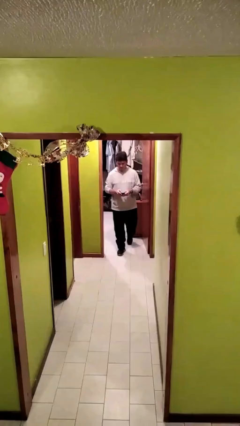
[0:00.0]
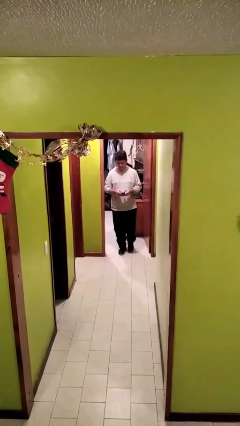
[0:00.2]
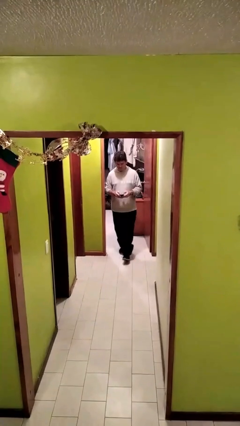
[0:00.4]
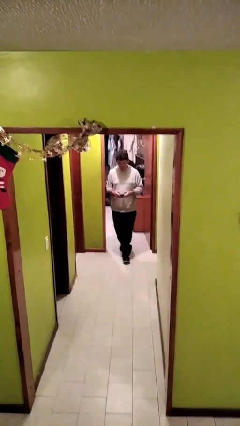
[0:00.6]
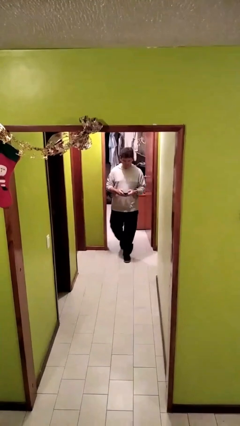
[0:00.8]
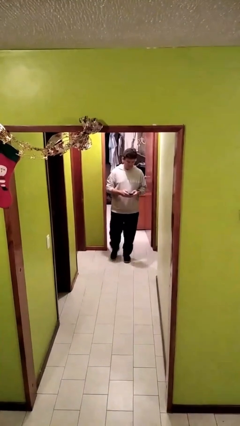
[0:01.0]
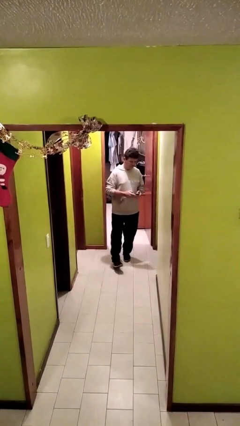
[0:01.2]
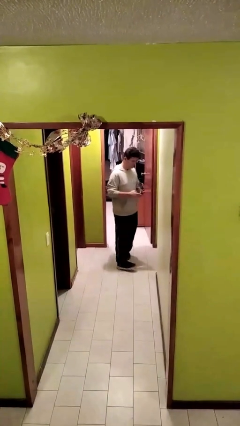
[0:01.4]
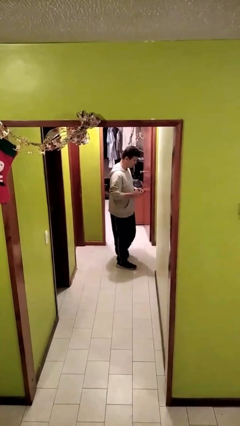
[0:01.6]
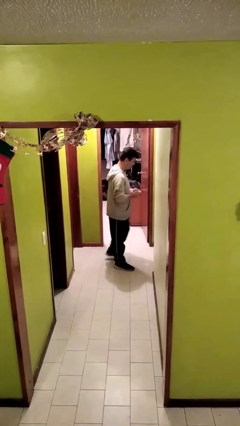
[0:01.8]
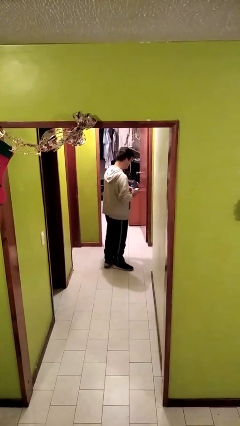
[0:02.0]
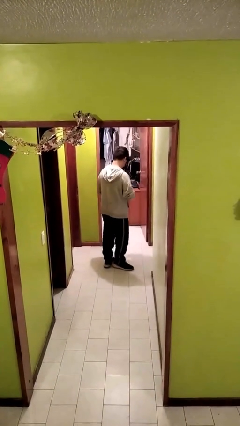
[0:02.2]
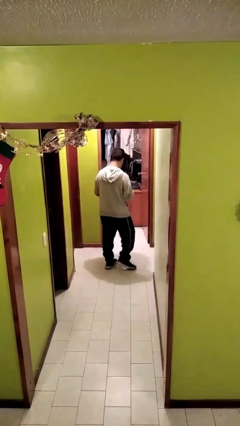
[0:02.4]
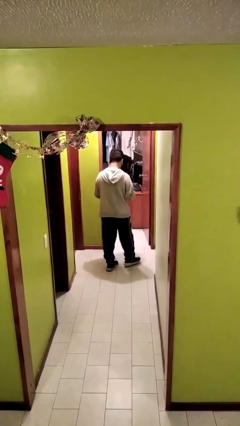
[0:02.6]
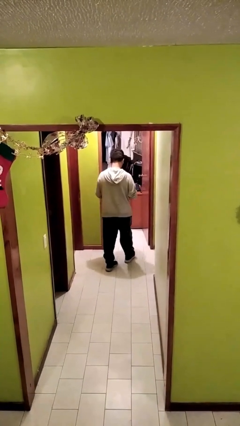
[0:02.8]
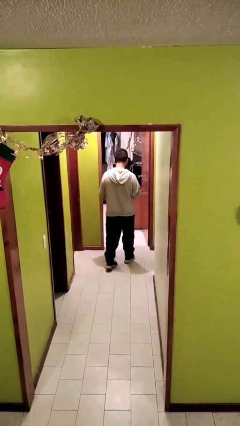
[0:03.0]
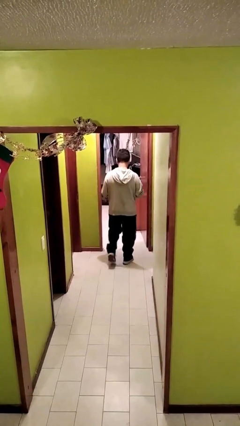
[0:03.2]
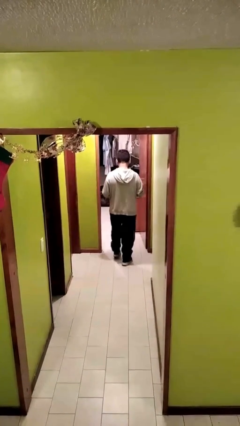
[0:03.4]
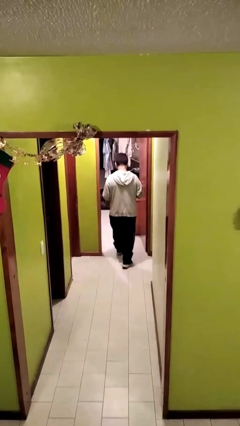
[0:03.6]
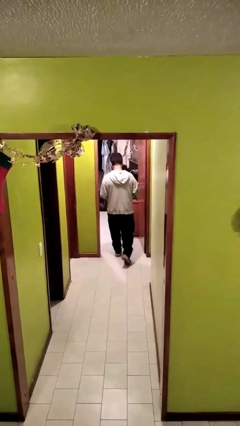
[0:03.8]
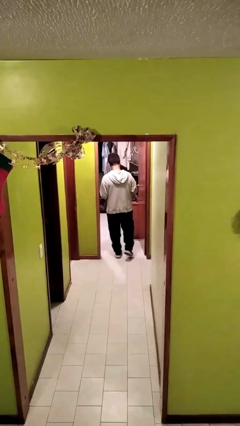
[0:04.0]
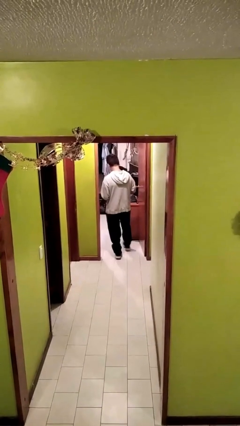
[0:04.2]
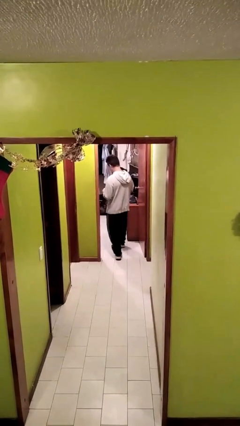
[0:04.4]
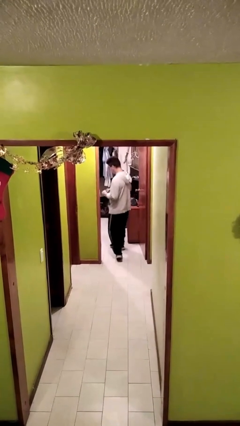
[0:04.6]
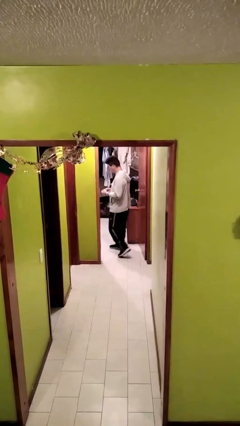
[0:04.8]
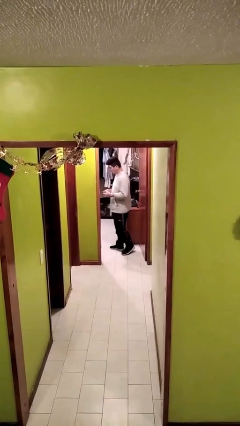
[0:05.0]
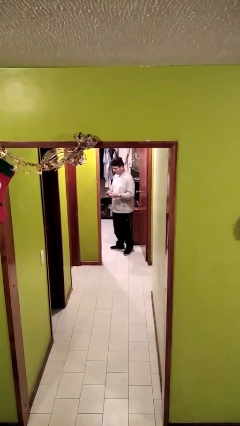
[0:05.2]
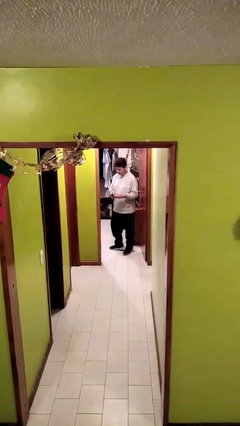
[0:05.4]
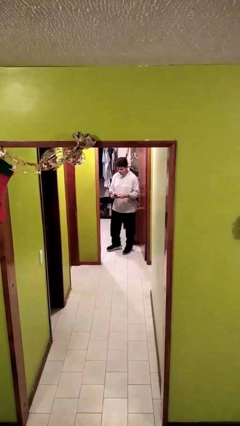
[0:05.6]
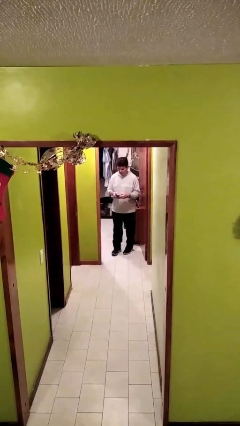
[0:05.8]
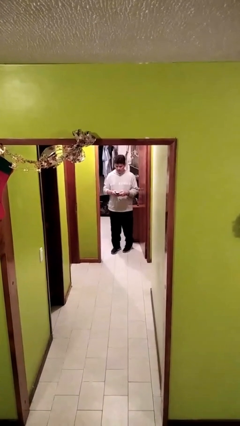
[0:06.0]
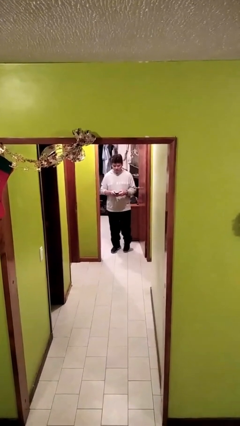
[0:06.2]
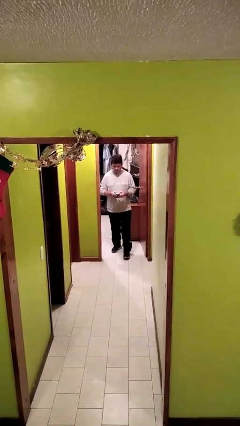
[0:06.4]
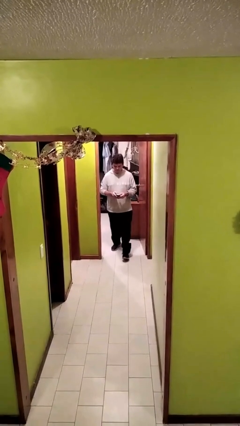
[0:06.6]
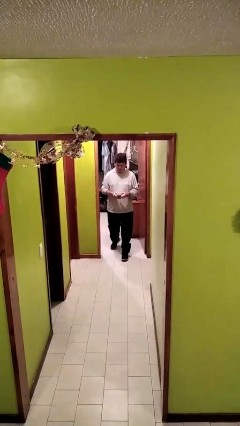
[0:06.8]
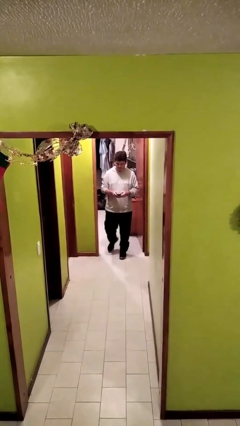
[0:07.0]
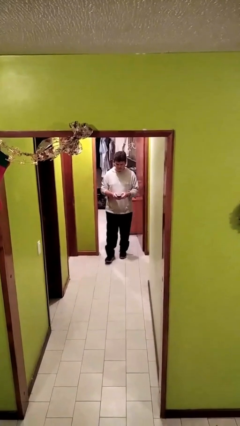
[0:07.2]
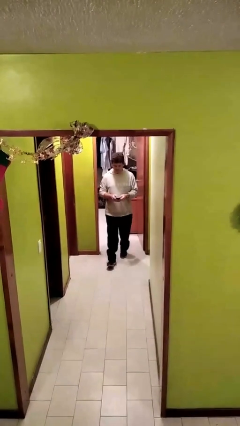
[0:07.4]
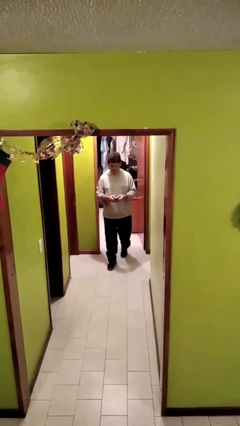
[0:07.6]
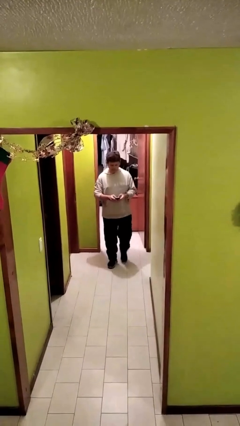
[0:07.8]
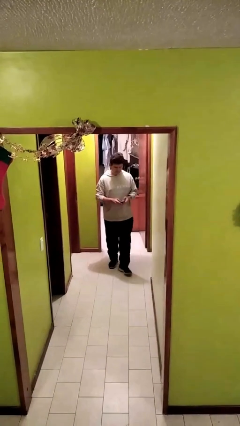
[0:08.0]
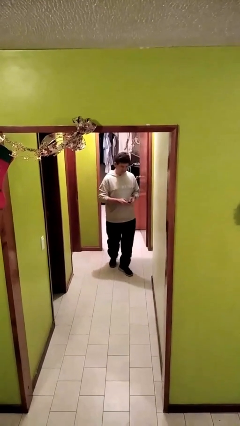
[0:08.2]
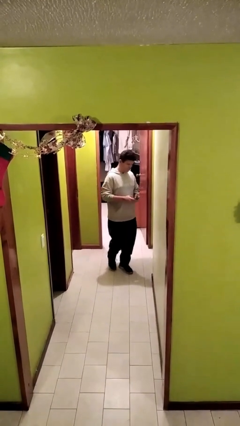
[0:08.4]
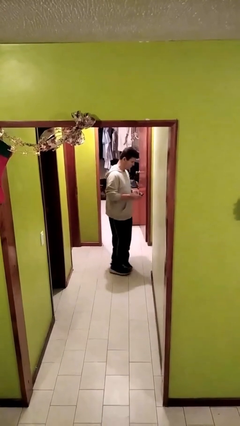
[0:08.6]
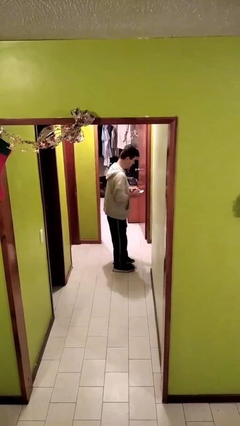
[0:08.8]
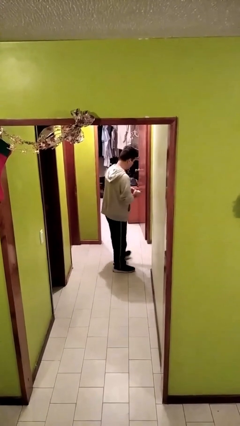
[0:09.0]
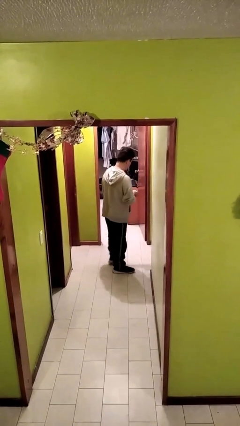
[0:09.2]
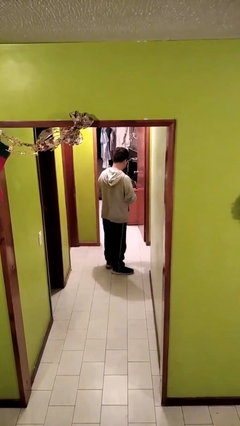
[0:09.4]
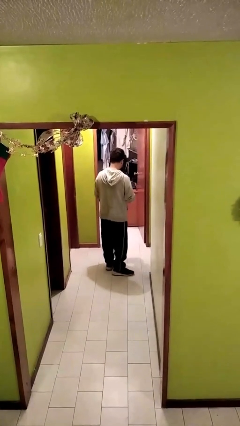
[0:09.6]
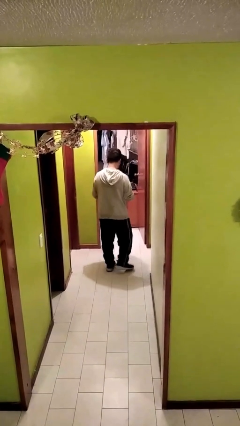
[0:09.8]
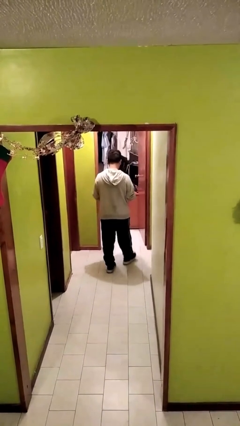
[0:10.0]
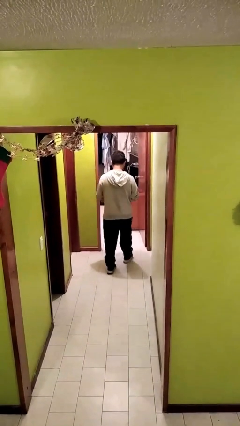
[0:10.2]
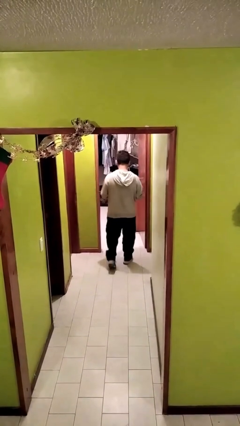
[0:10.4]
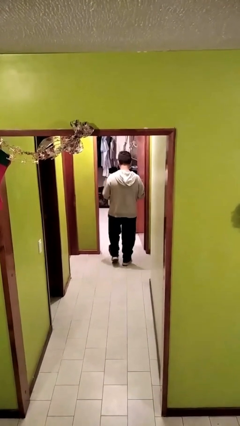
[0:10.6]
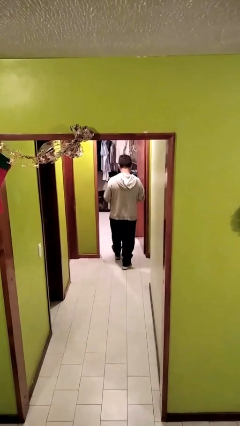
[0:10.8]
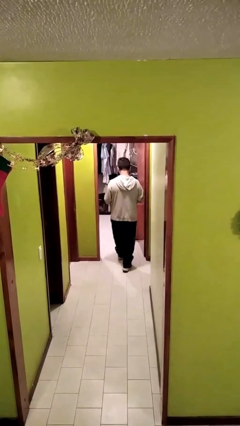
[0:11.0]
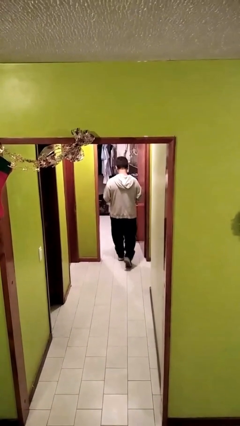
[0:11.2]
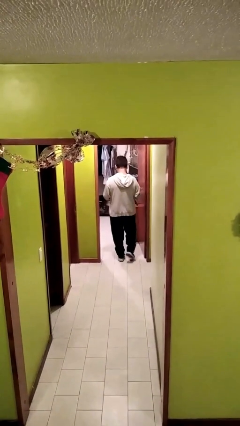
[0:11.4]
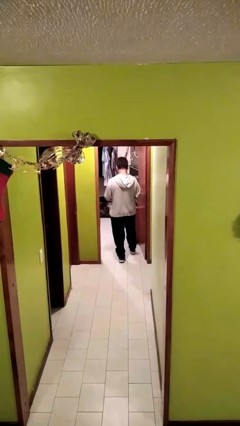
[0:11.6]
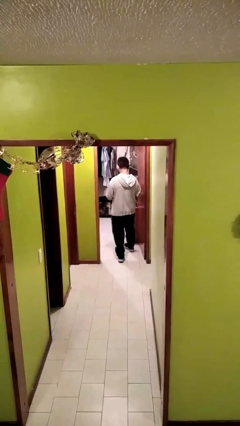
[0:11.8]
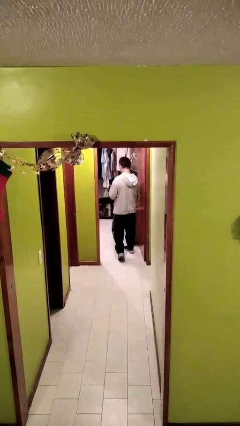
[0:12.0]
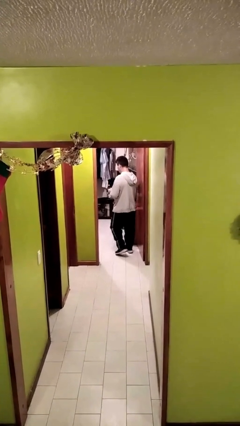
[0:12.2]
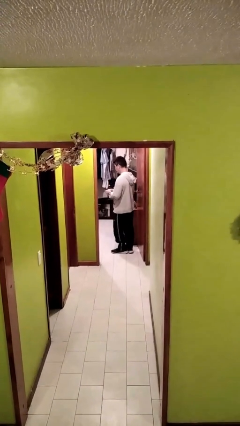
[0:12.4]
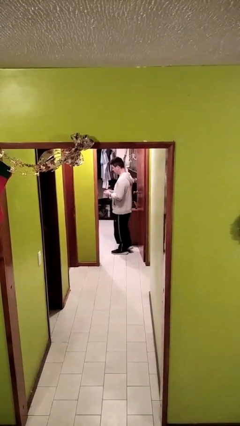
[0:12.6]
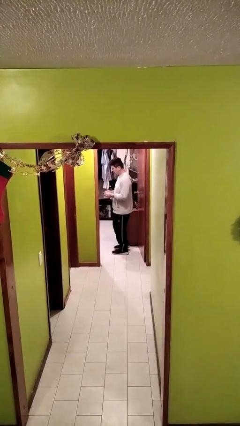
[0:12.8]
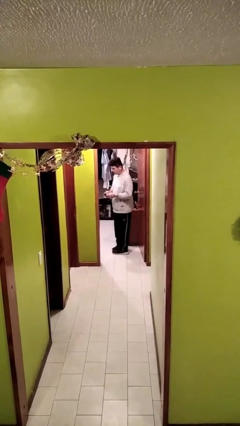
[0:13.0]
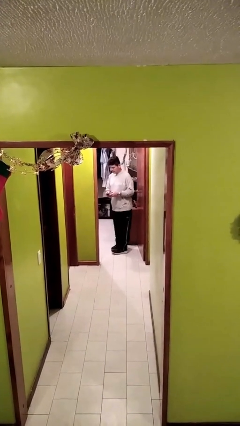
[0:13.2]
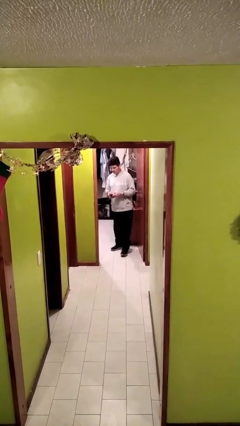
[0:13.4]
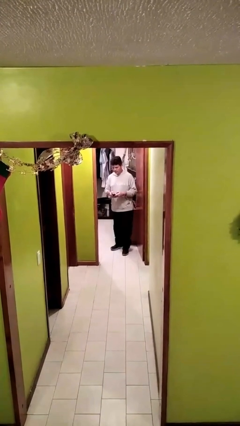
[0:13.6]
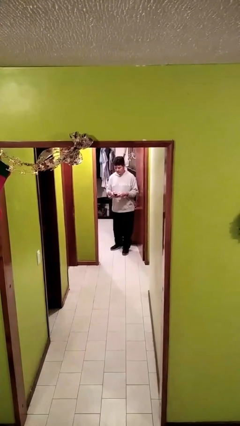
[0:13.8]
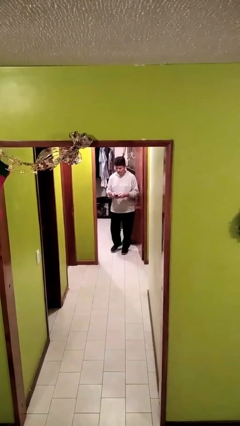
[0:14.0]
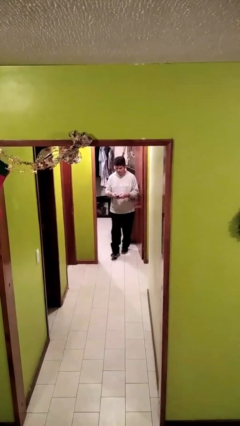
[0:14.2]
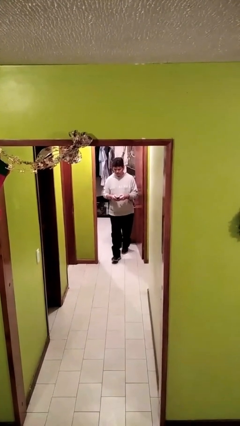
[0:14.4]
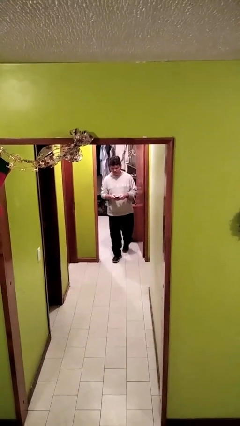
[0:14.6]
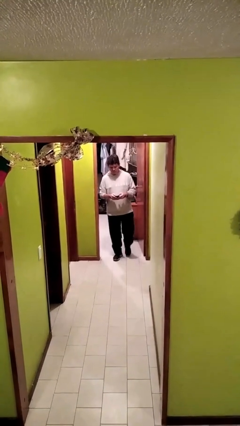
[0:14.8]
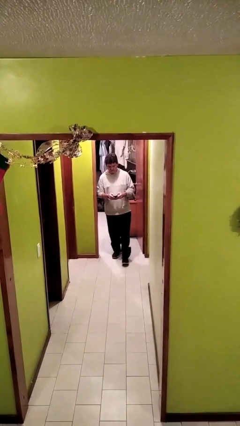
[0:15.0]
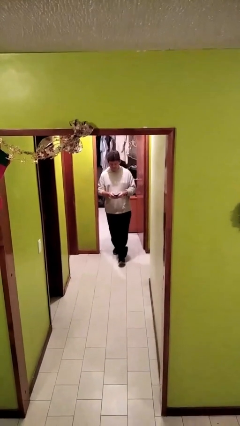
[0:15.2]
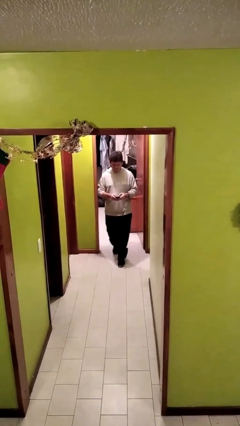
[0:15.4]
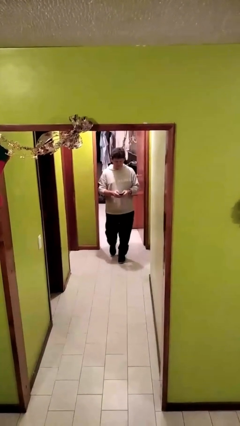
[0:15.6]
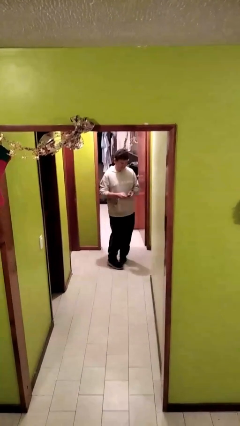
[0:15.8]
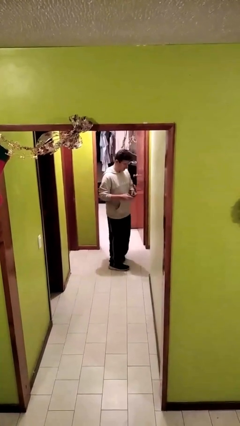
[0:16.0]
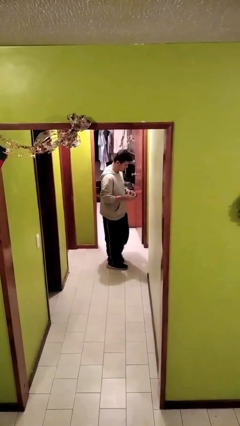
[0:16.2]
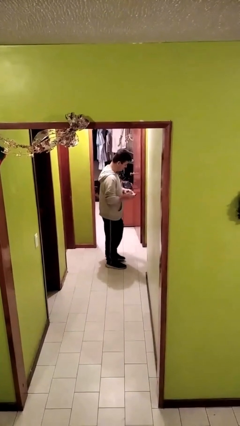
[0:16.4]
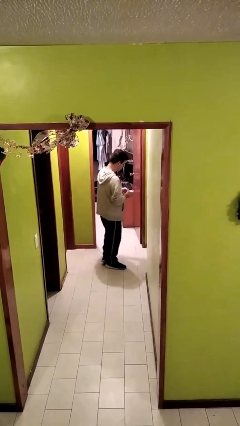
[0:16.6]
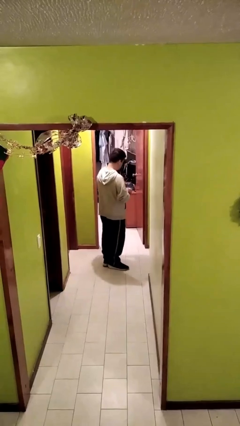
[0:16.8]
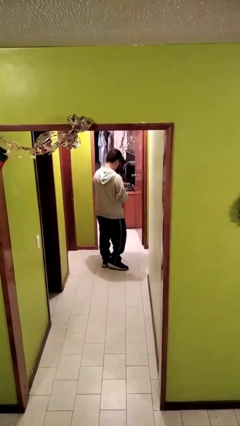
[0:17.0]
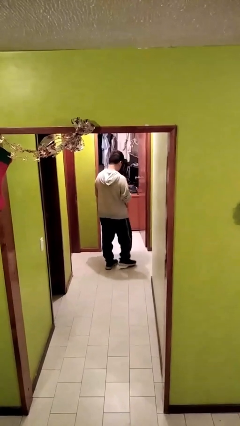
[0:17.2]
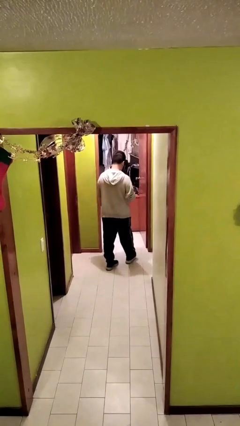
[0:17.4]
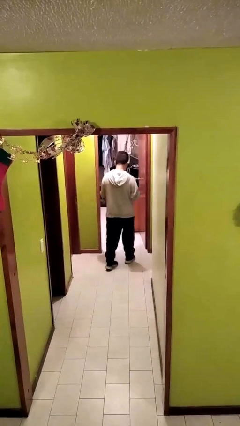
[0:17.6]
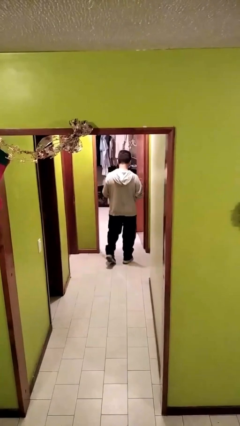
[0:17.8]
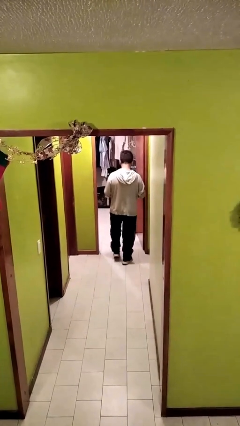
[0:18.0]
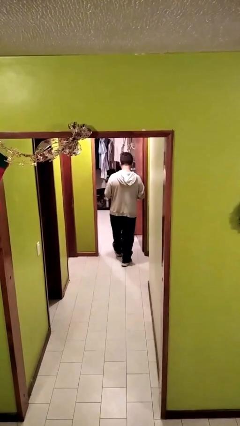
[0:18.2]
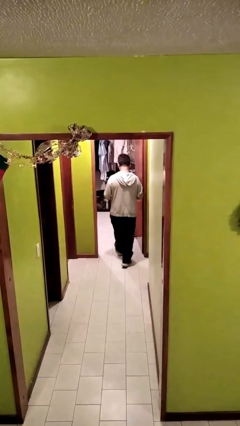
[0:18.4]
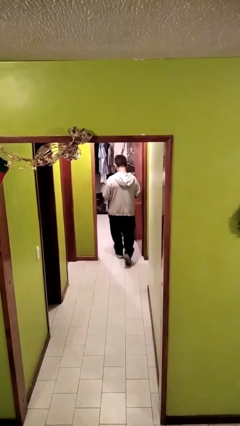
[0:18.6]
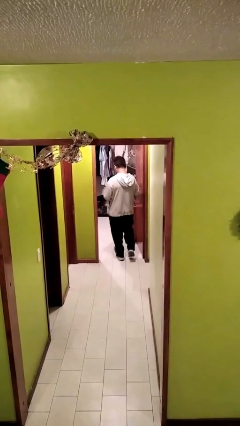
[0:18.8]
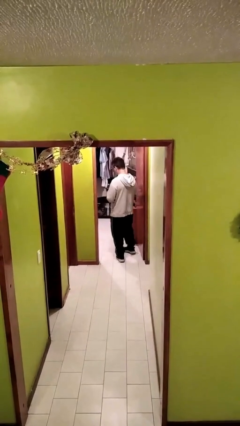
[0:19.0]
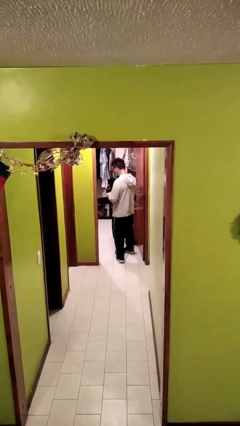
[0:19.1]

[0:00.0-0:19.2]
person texts on phone
